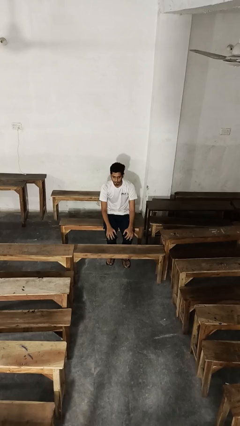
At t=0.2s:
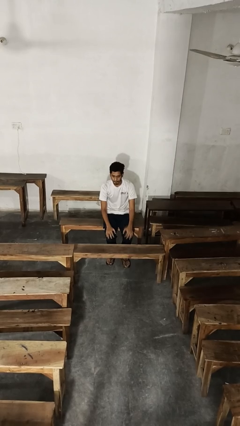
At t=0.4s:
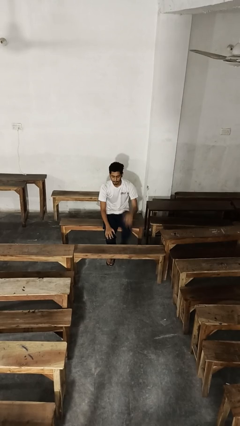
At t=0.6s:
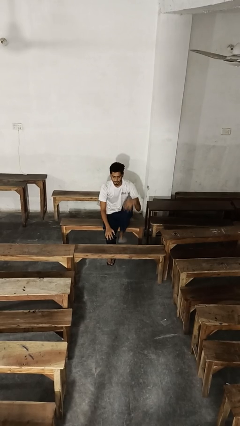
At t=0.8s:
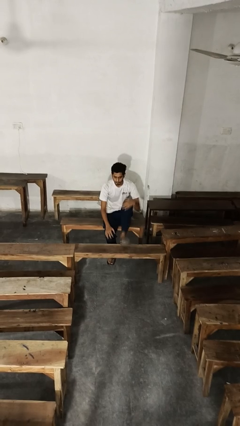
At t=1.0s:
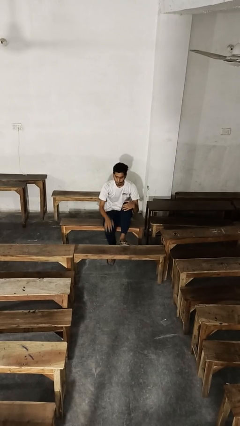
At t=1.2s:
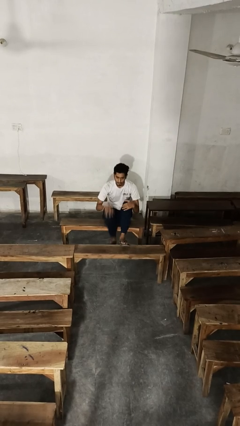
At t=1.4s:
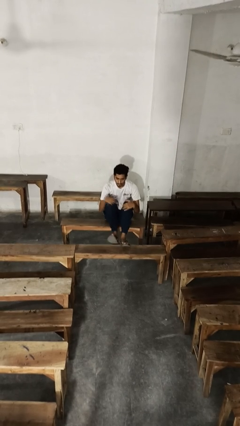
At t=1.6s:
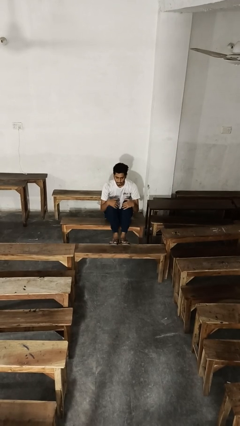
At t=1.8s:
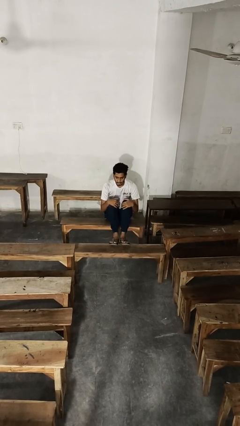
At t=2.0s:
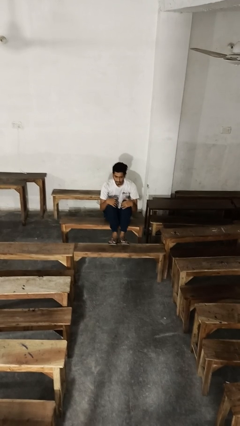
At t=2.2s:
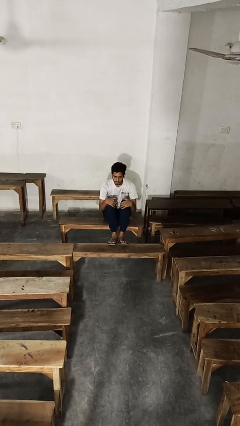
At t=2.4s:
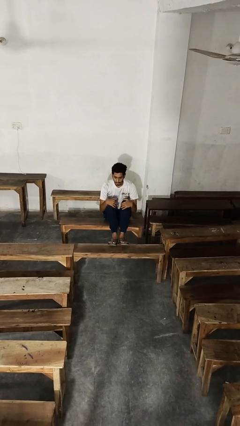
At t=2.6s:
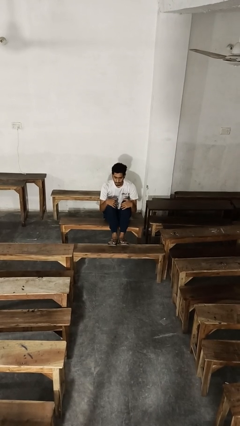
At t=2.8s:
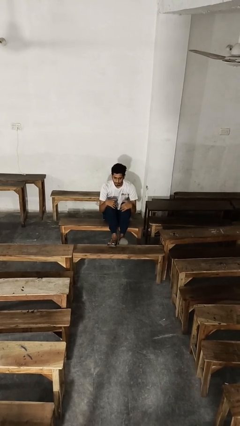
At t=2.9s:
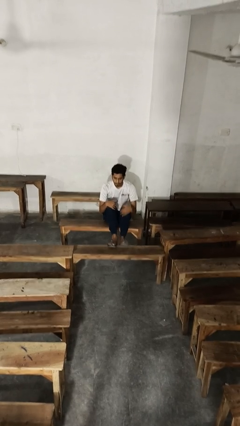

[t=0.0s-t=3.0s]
person puts feet up

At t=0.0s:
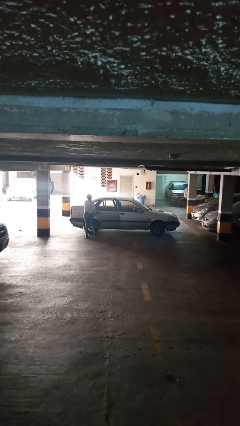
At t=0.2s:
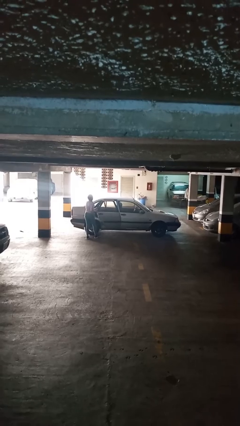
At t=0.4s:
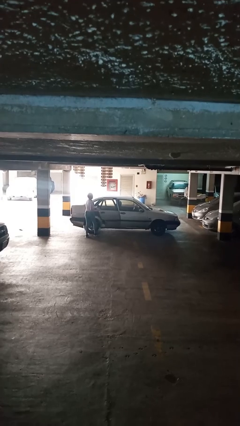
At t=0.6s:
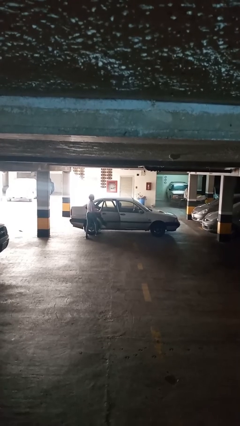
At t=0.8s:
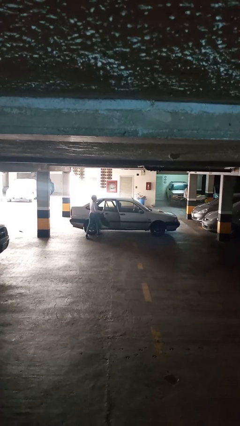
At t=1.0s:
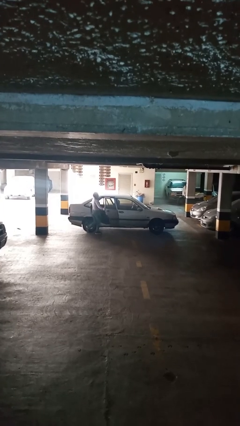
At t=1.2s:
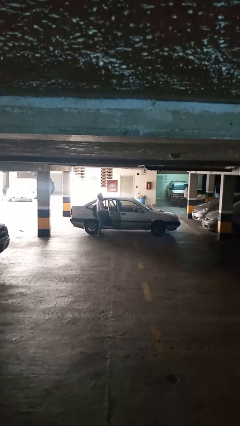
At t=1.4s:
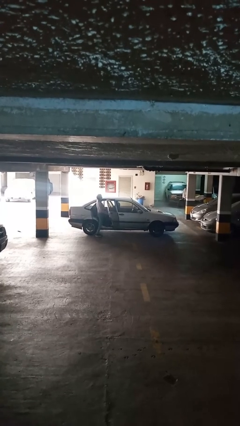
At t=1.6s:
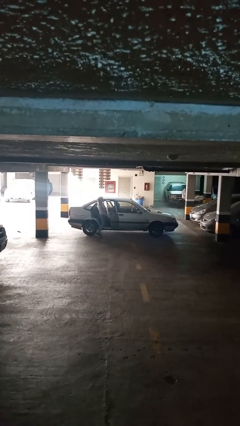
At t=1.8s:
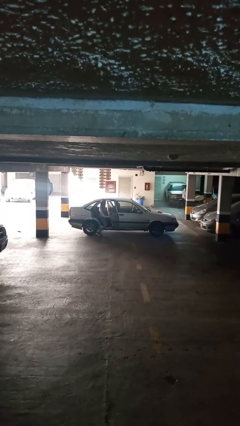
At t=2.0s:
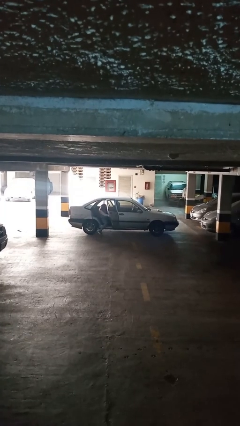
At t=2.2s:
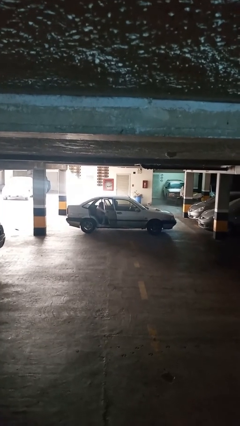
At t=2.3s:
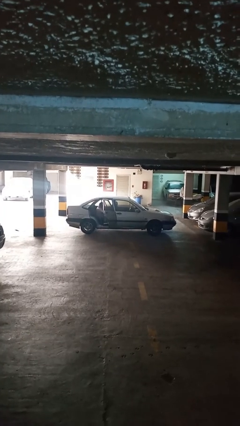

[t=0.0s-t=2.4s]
car picks up person

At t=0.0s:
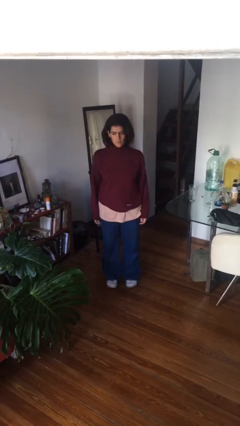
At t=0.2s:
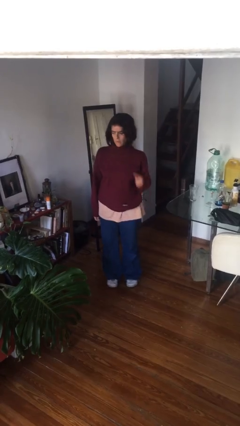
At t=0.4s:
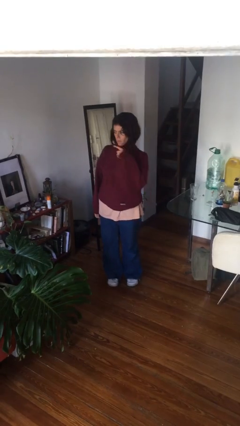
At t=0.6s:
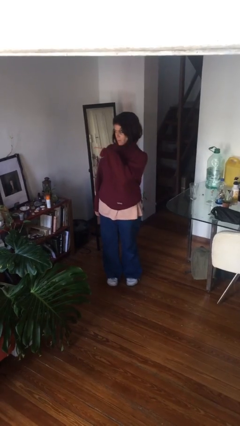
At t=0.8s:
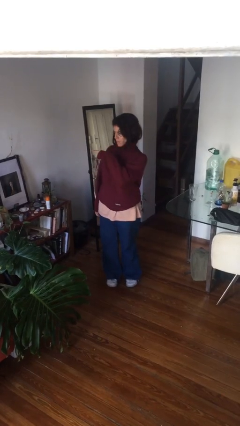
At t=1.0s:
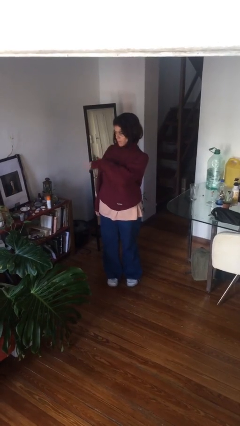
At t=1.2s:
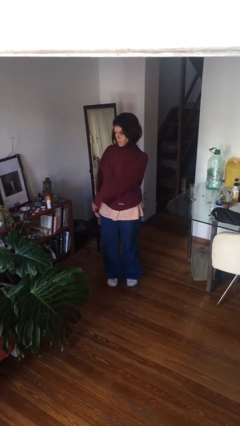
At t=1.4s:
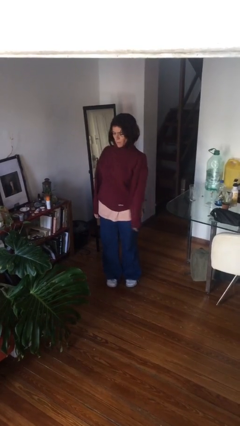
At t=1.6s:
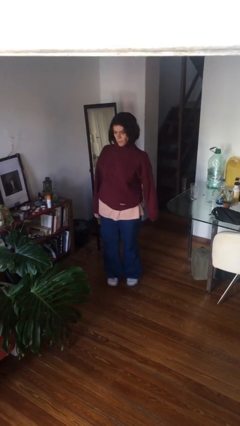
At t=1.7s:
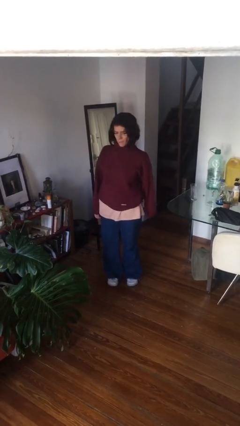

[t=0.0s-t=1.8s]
person gestures swipe right

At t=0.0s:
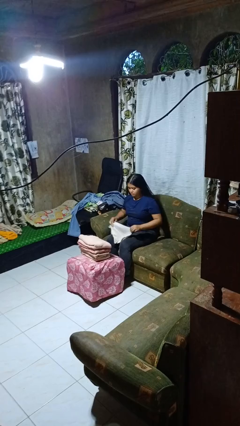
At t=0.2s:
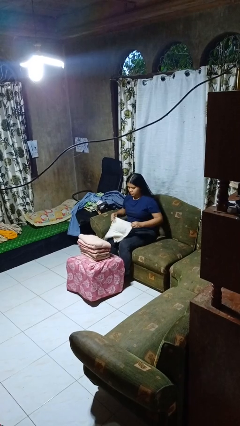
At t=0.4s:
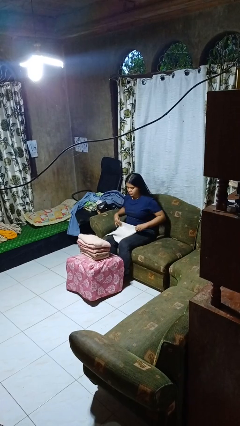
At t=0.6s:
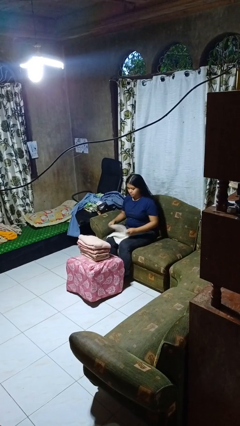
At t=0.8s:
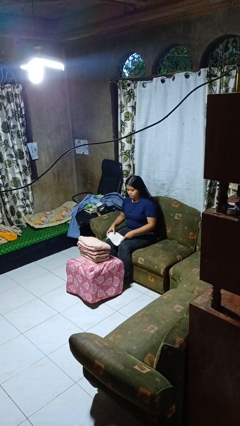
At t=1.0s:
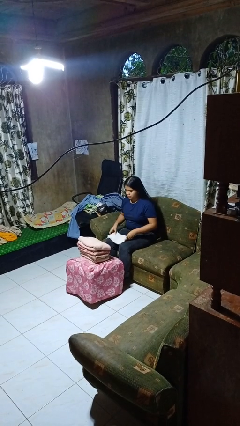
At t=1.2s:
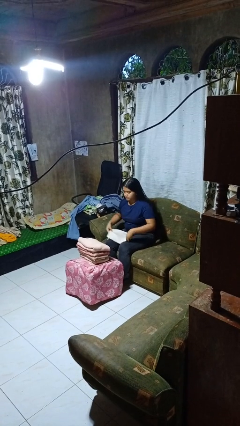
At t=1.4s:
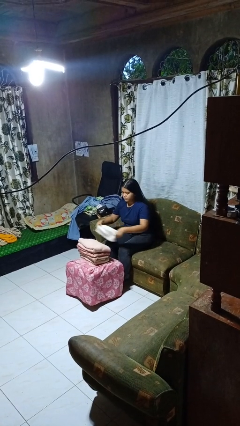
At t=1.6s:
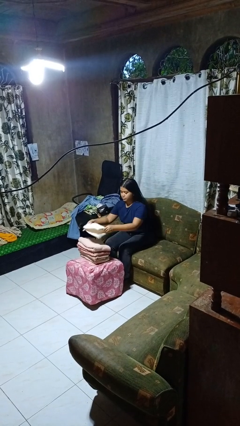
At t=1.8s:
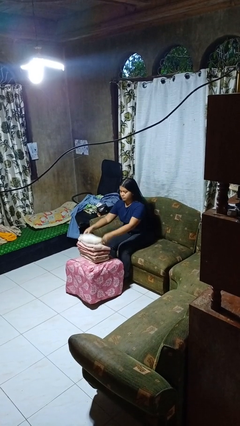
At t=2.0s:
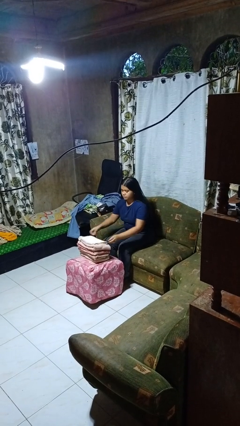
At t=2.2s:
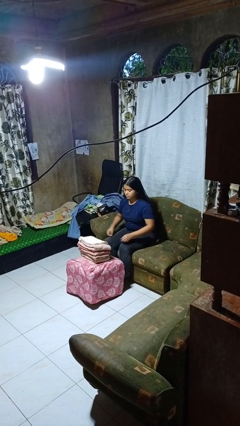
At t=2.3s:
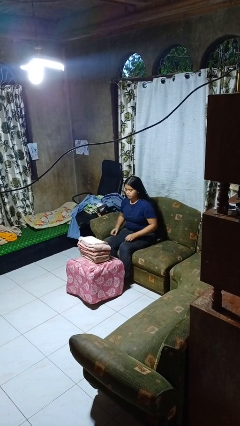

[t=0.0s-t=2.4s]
person folds towel

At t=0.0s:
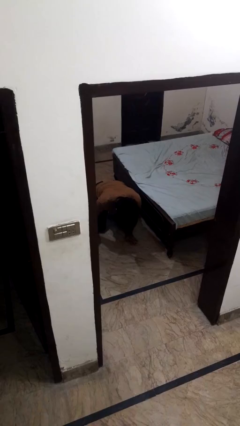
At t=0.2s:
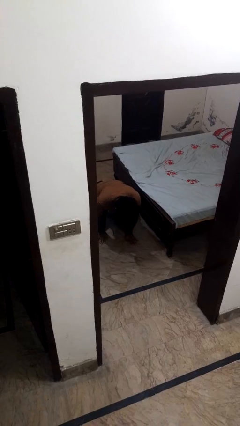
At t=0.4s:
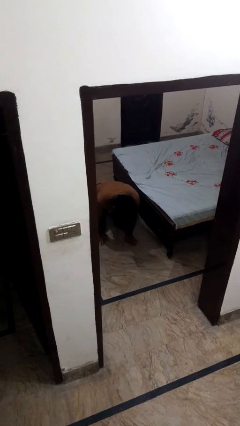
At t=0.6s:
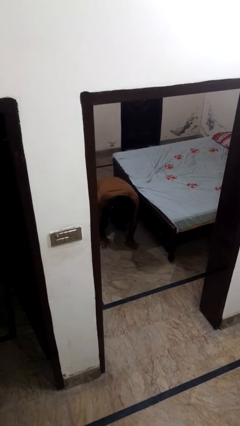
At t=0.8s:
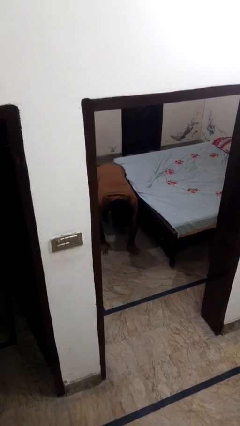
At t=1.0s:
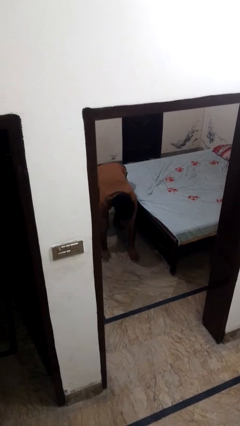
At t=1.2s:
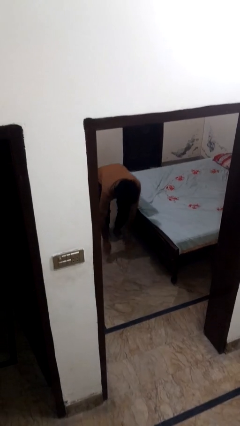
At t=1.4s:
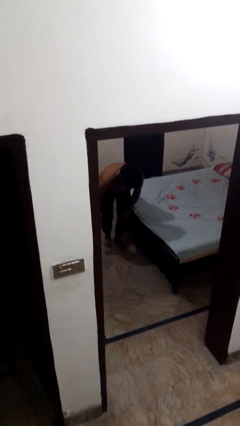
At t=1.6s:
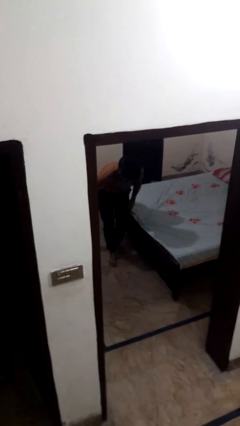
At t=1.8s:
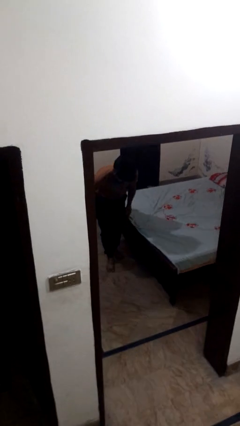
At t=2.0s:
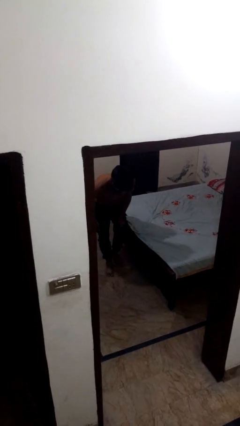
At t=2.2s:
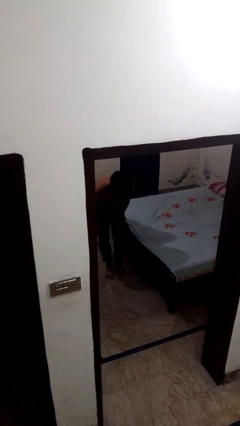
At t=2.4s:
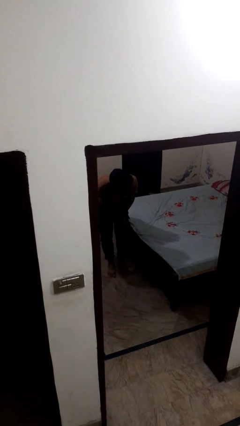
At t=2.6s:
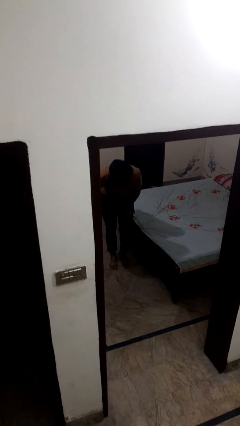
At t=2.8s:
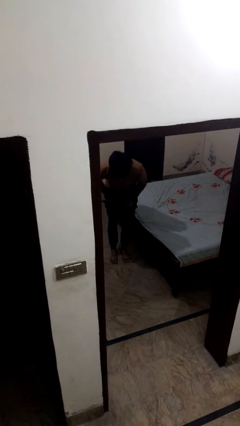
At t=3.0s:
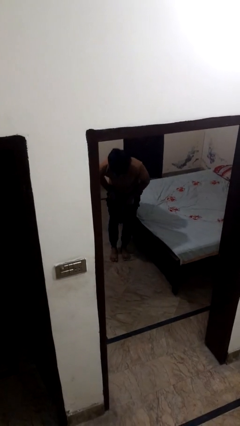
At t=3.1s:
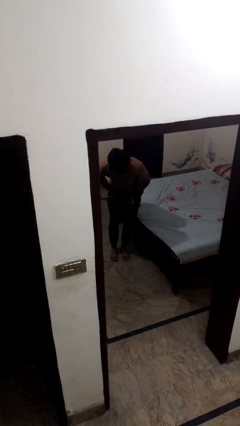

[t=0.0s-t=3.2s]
person stands up from floor

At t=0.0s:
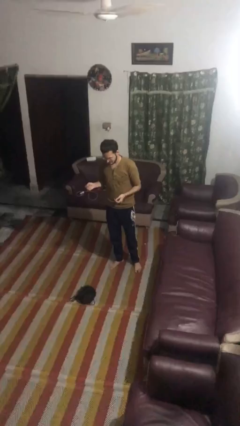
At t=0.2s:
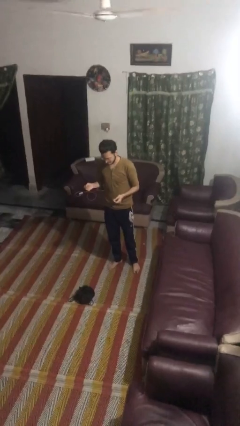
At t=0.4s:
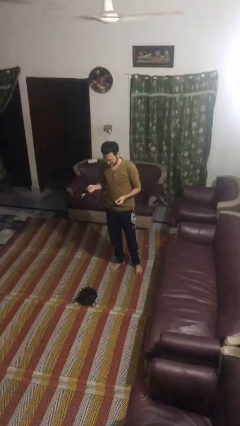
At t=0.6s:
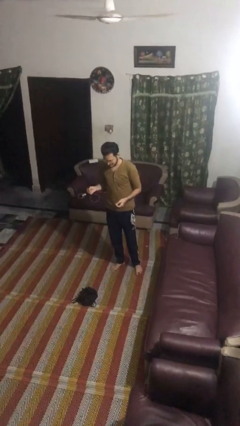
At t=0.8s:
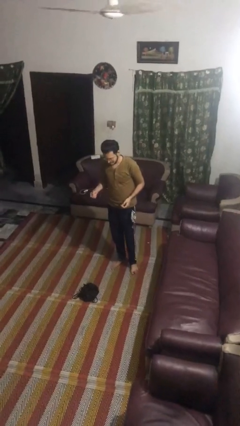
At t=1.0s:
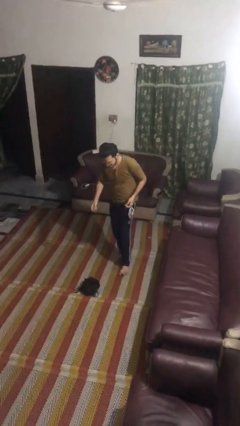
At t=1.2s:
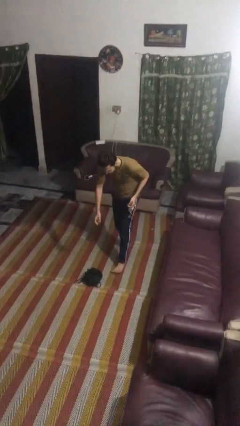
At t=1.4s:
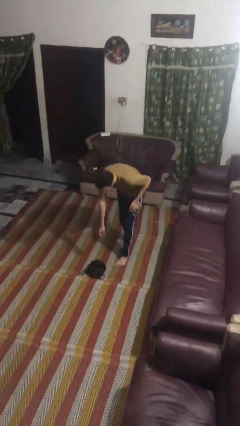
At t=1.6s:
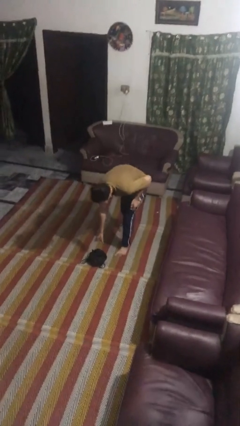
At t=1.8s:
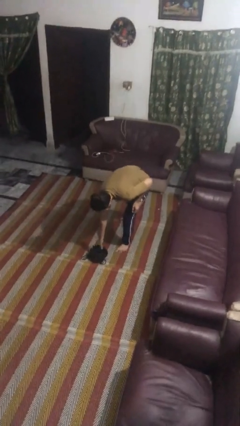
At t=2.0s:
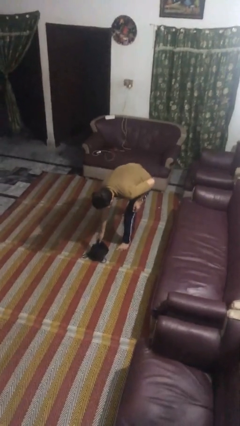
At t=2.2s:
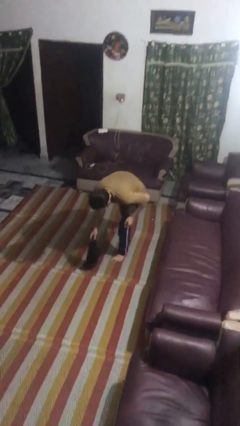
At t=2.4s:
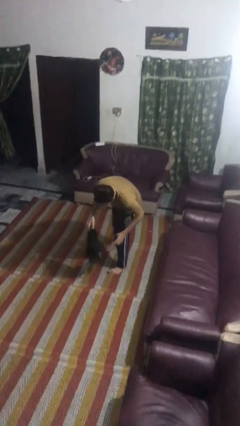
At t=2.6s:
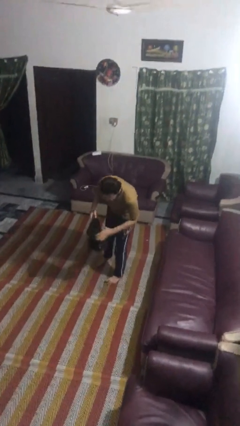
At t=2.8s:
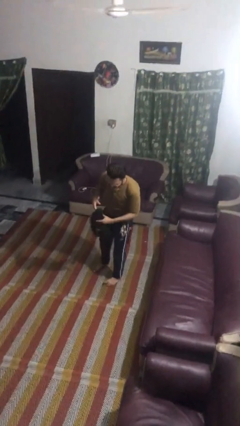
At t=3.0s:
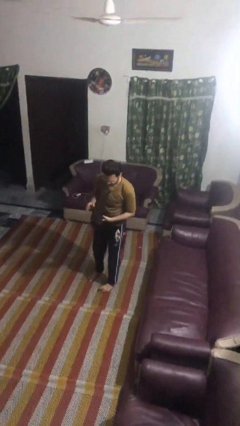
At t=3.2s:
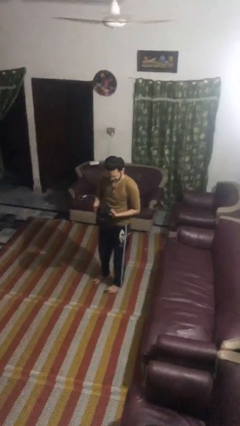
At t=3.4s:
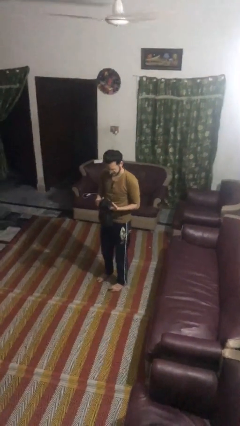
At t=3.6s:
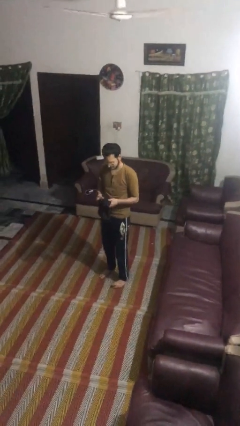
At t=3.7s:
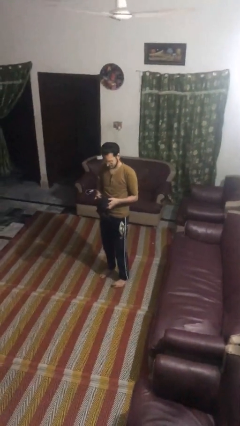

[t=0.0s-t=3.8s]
person picks up object from floor

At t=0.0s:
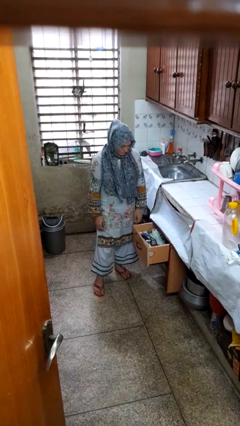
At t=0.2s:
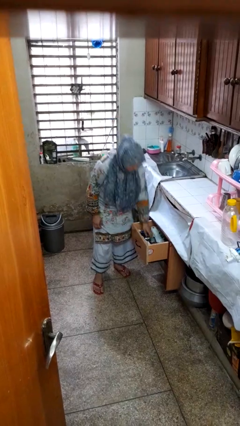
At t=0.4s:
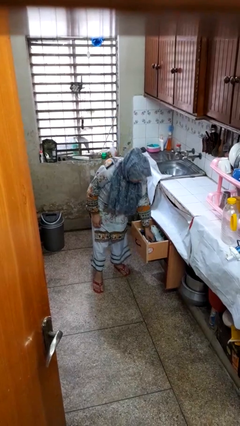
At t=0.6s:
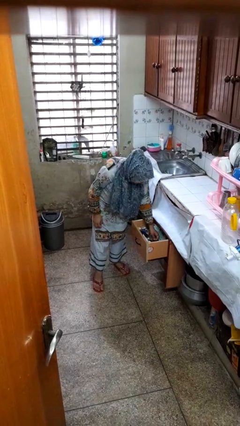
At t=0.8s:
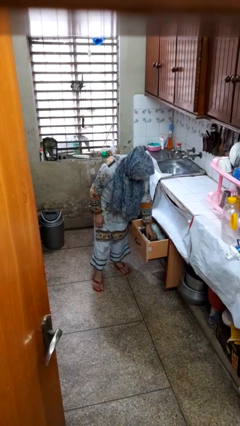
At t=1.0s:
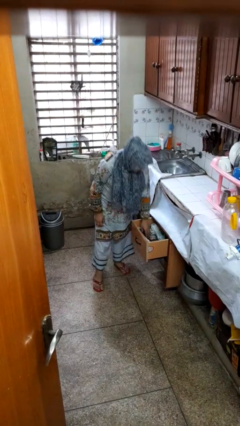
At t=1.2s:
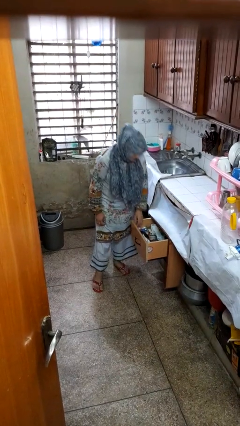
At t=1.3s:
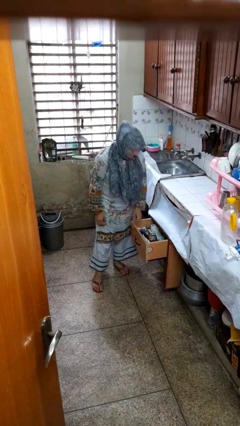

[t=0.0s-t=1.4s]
person searches in kitchen drawer
